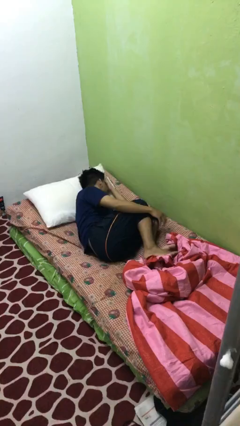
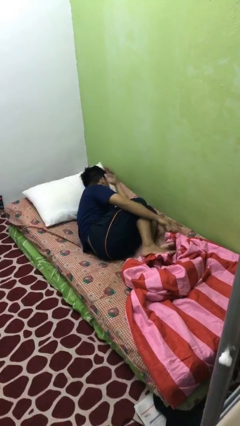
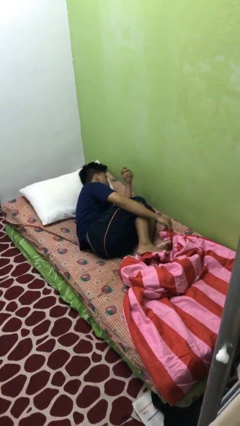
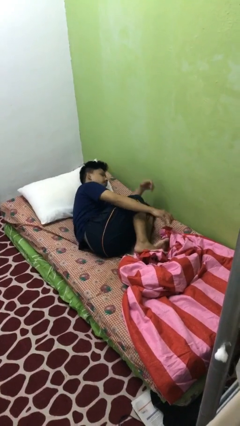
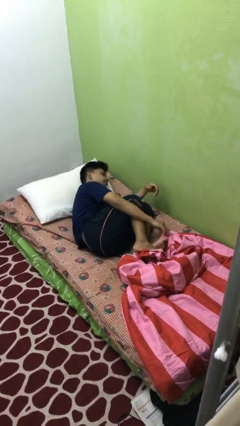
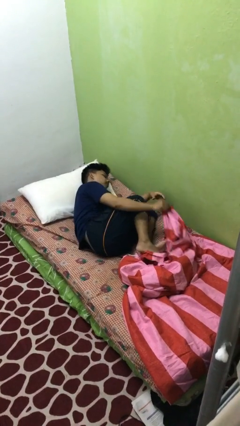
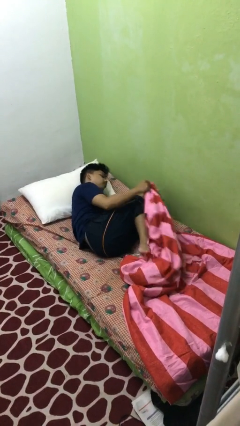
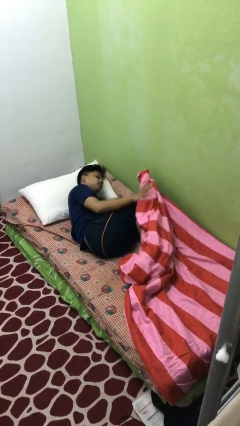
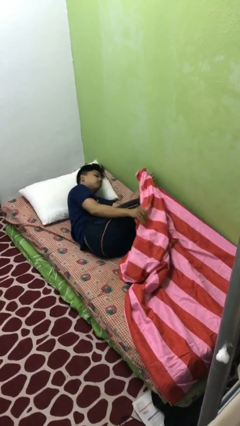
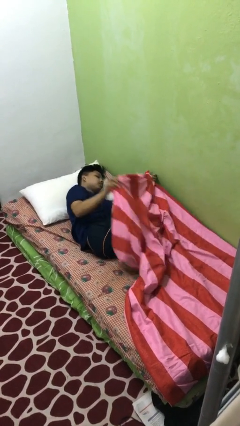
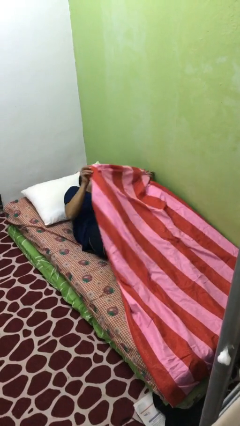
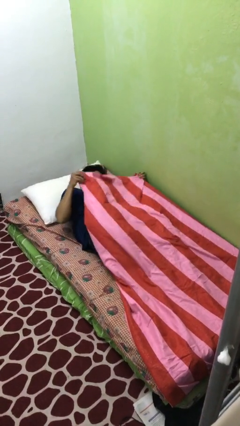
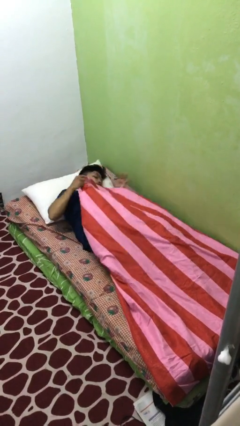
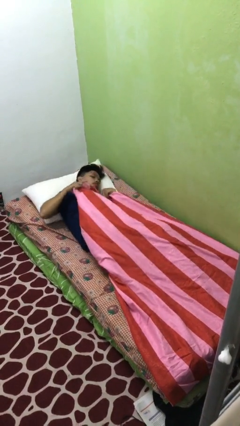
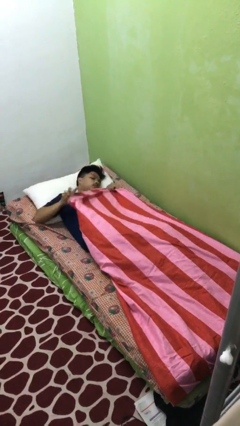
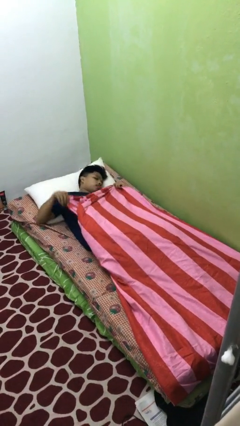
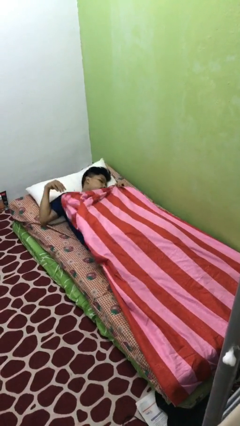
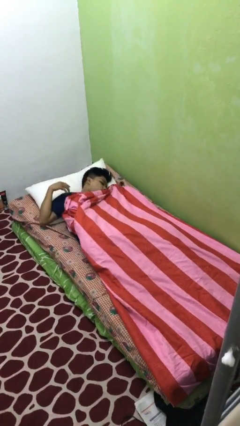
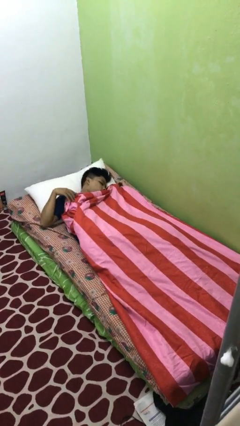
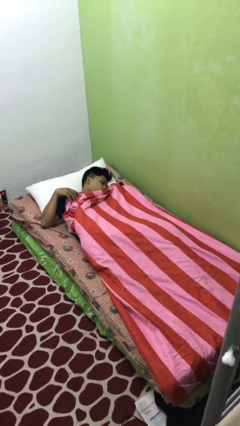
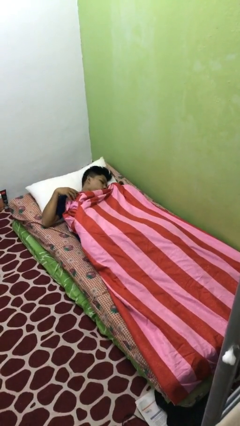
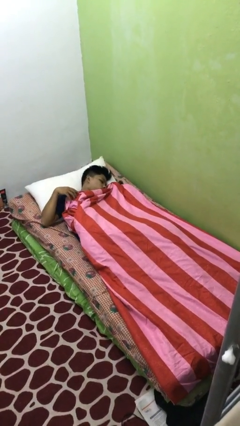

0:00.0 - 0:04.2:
person covers with bedsheets

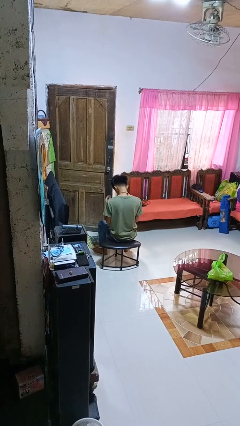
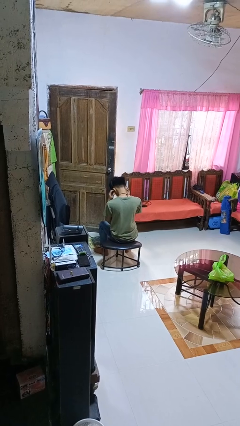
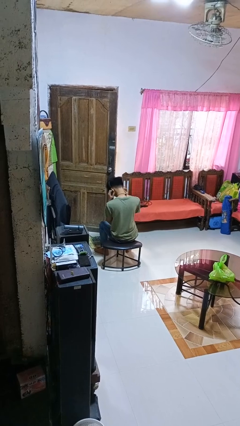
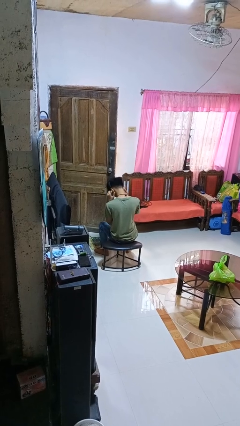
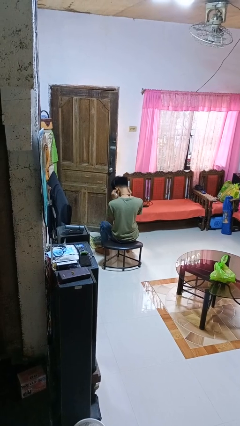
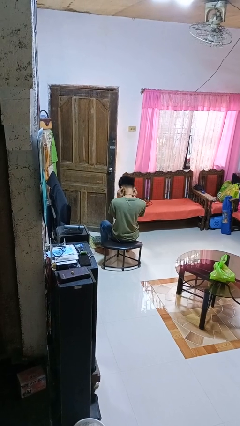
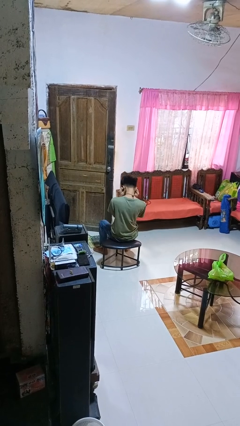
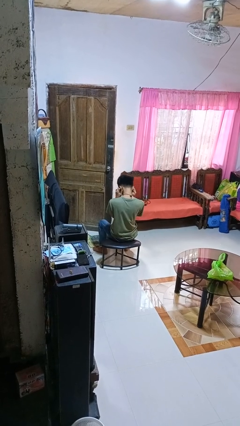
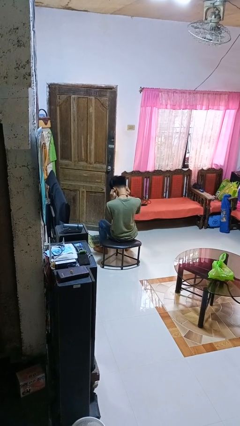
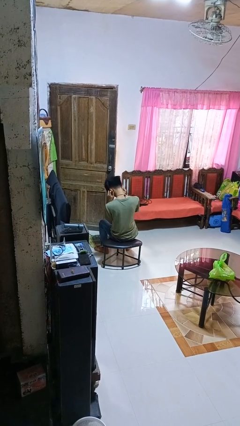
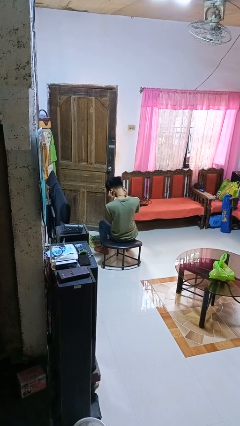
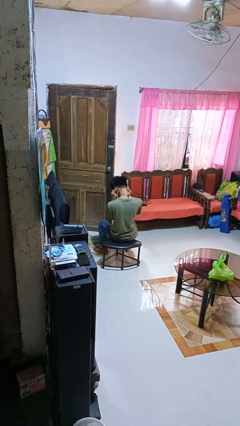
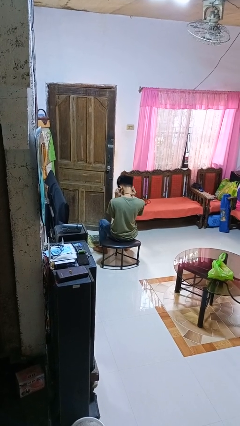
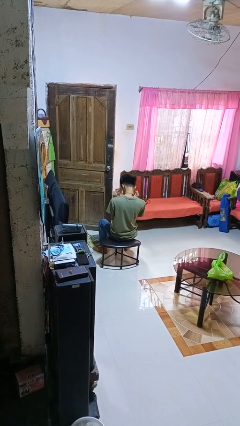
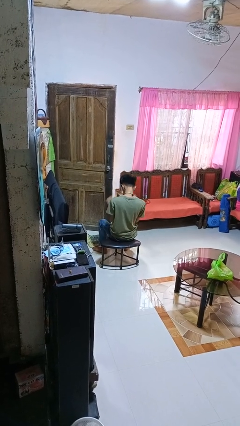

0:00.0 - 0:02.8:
person puts fingers in ear

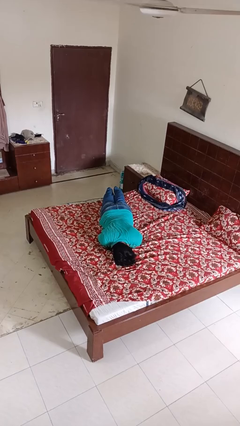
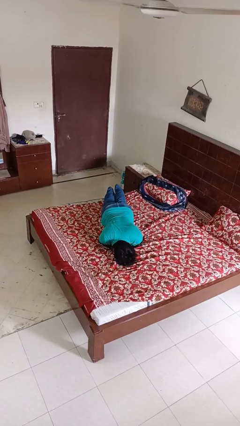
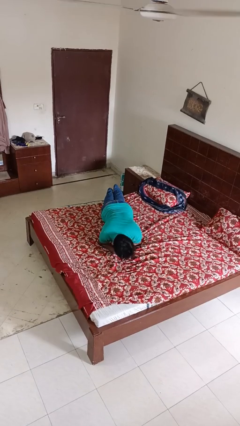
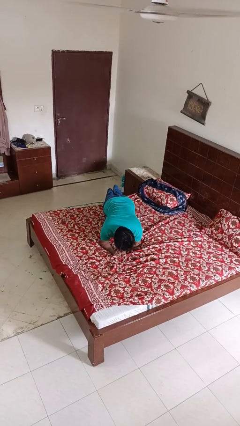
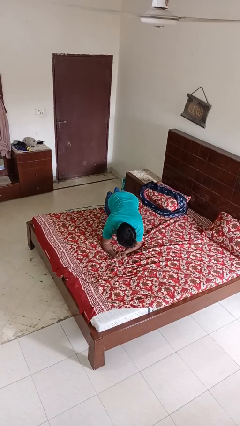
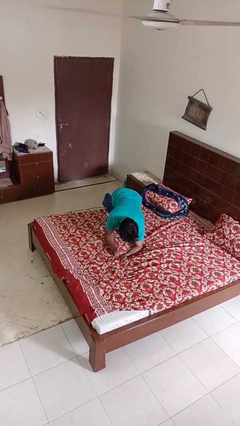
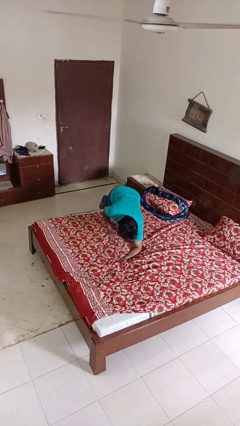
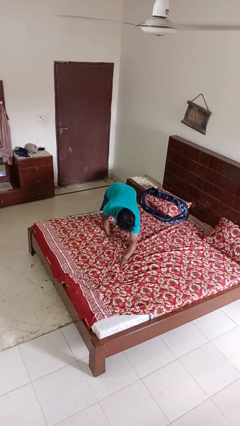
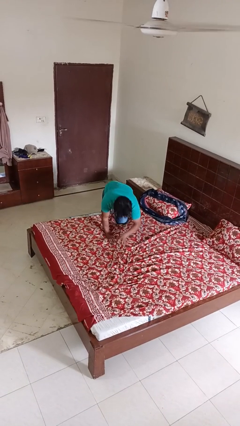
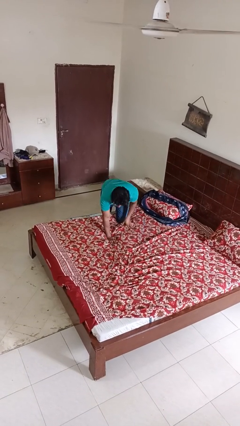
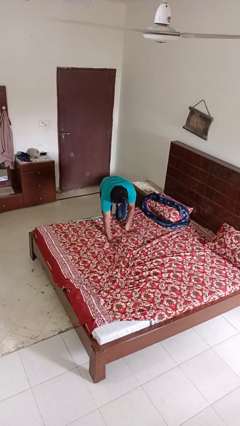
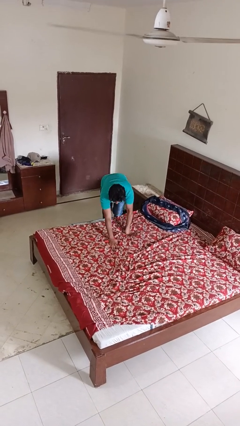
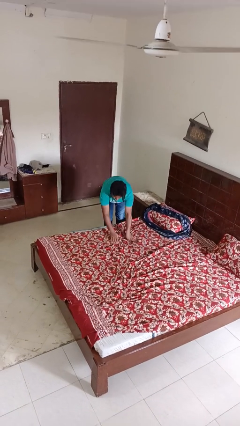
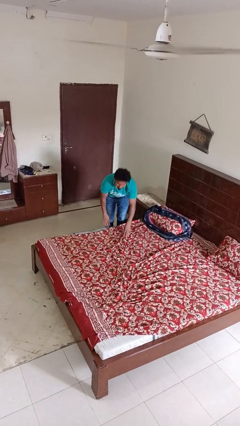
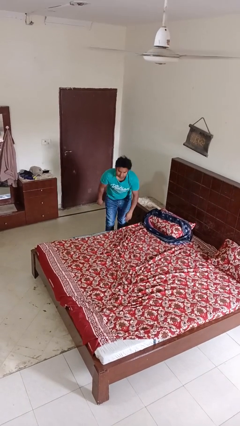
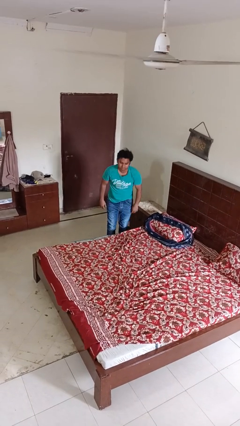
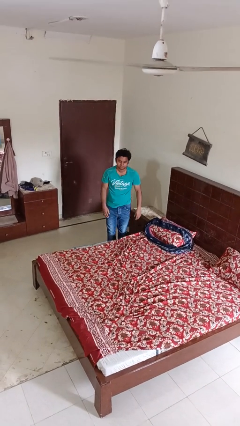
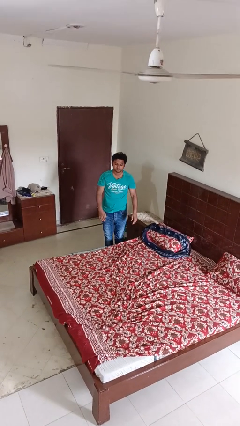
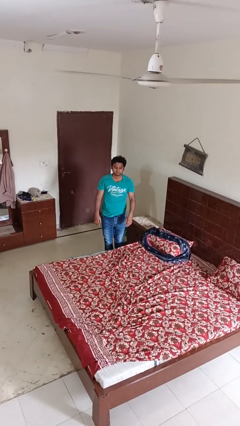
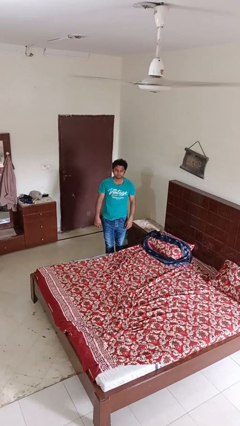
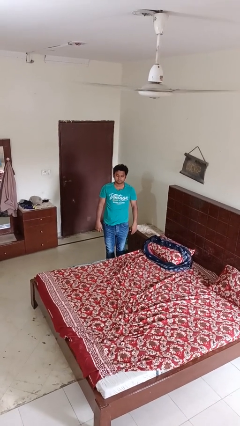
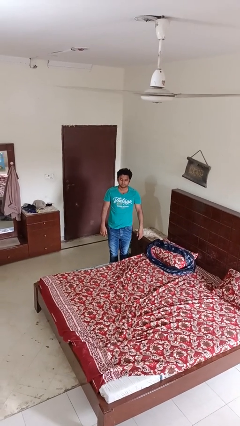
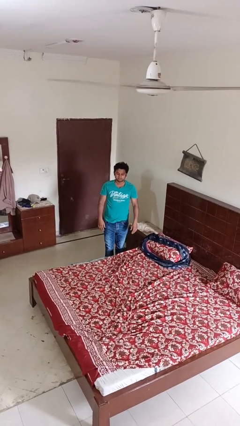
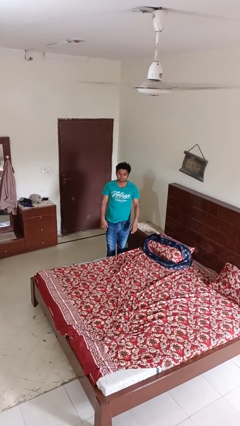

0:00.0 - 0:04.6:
person stands up

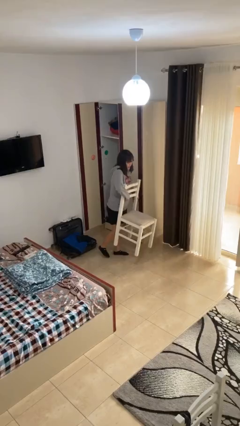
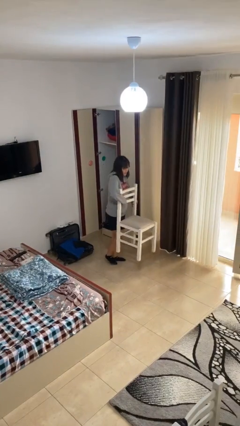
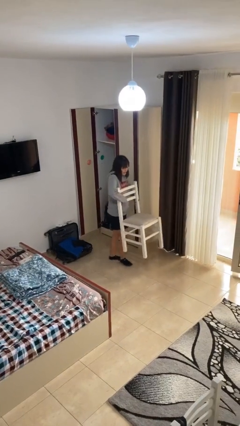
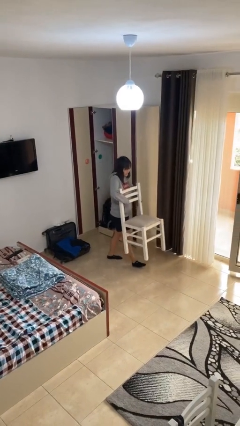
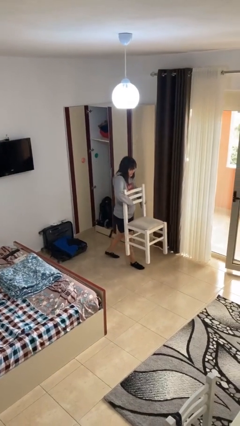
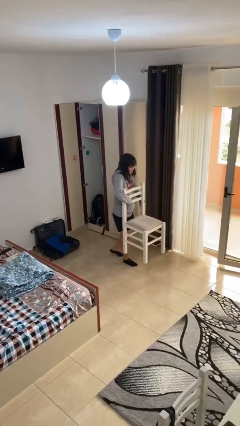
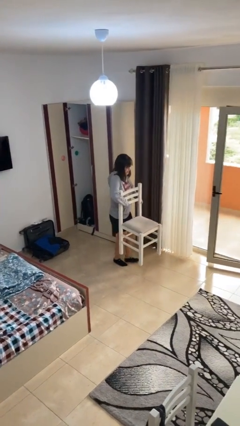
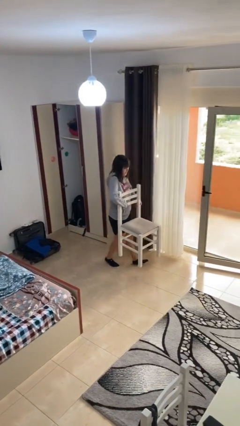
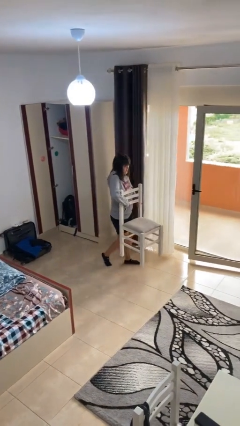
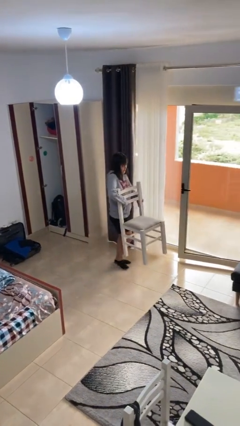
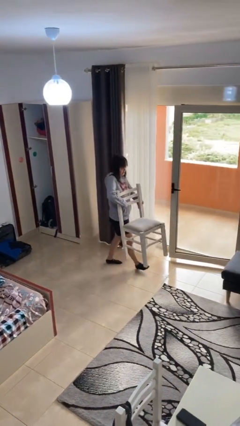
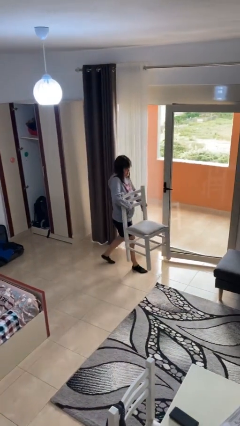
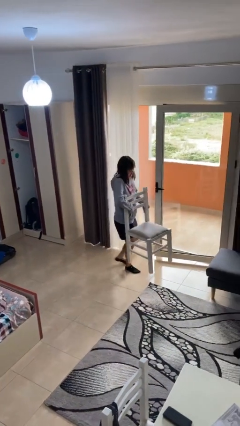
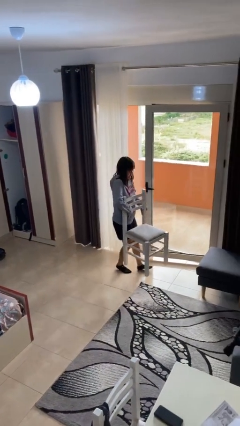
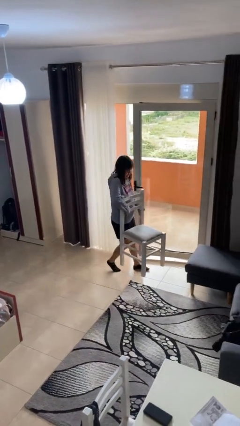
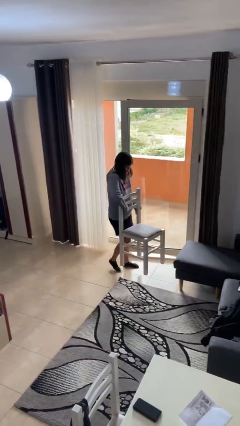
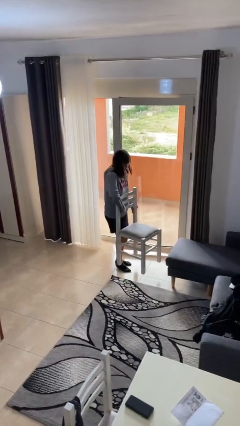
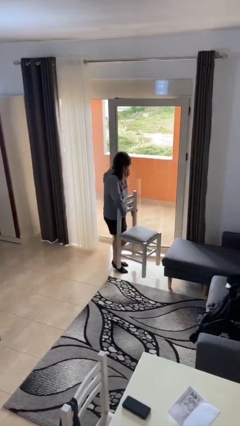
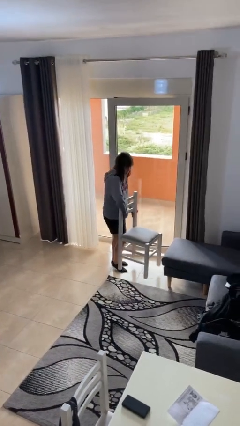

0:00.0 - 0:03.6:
person carries heavy object

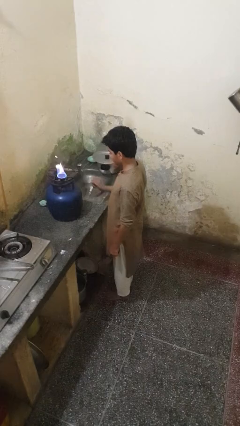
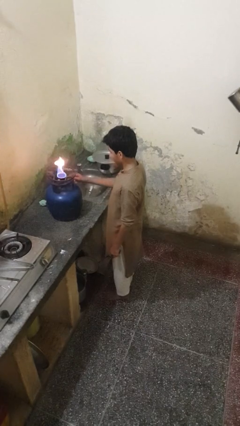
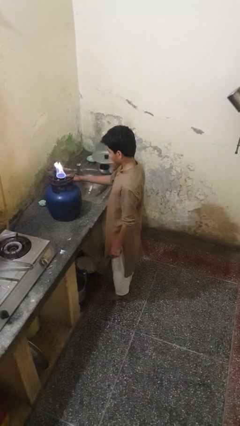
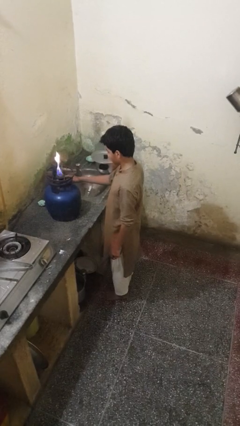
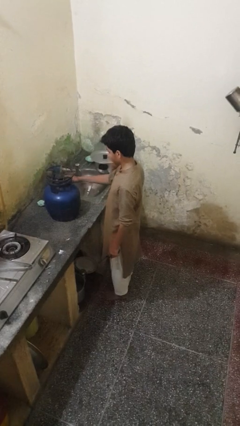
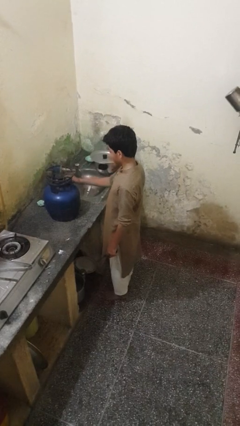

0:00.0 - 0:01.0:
person turns off stovetop

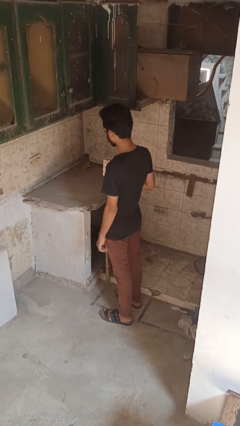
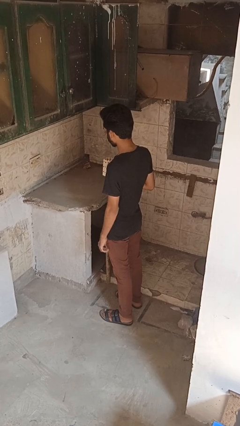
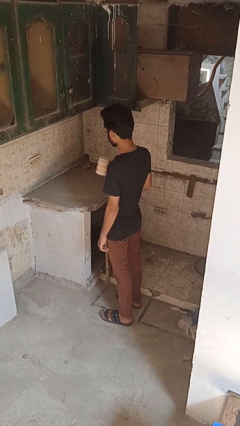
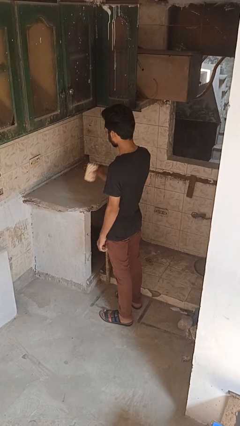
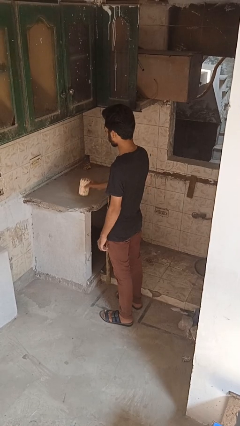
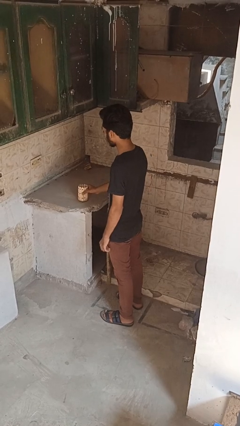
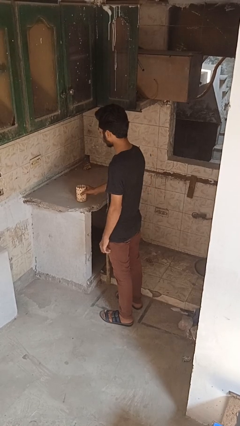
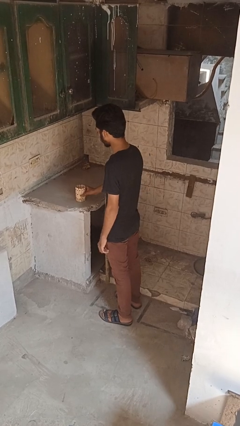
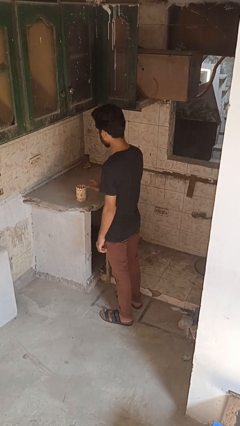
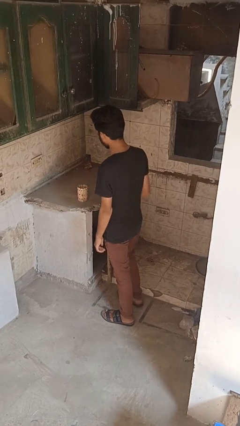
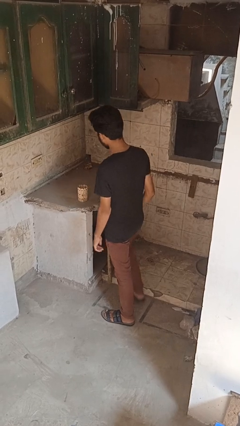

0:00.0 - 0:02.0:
person puts down object on countertop
